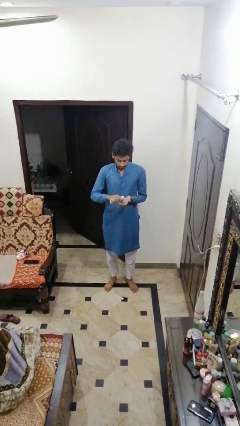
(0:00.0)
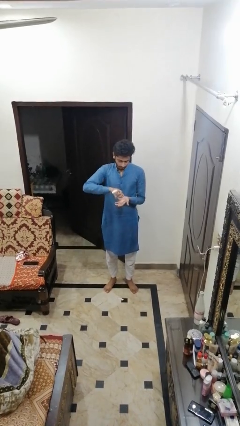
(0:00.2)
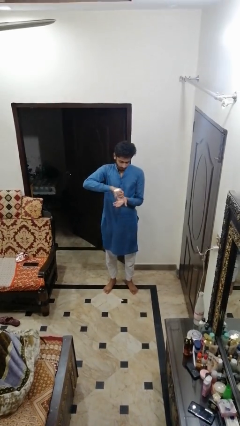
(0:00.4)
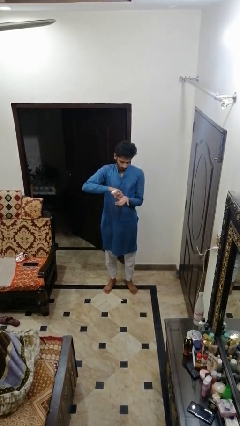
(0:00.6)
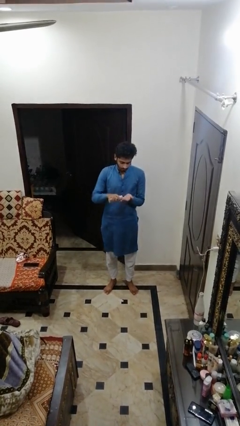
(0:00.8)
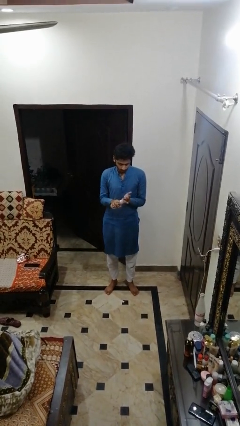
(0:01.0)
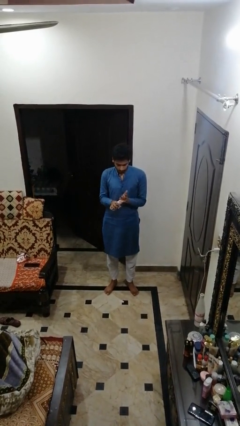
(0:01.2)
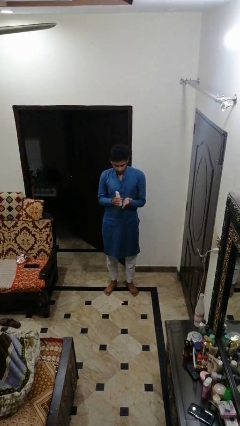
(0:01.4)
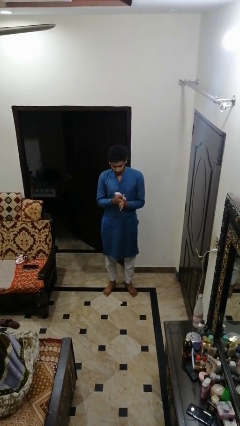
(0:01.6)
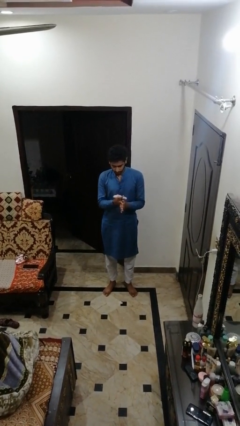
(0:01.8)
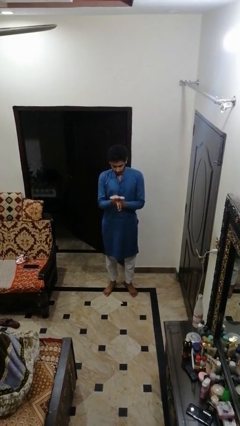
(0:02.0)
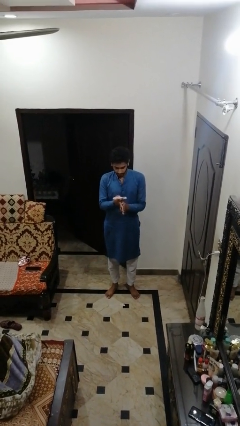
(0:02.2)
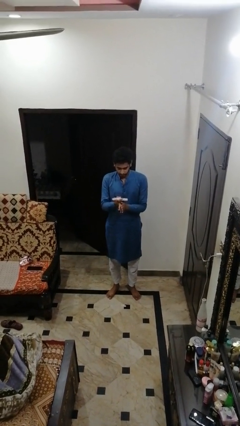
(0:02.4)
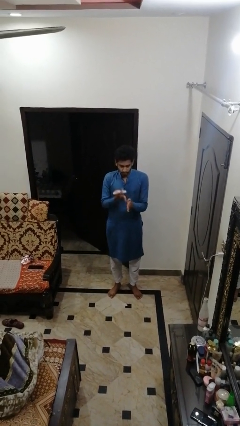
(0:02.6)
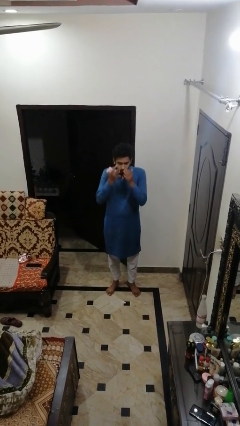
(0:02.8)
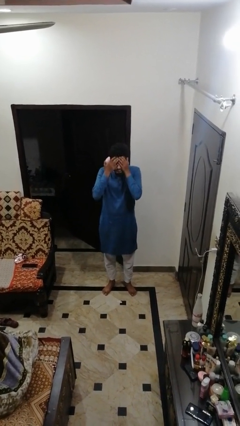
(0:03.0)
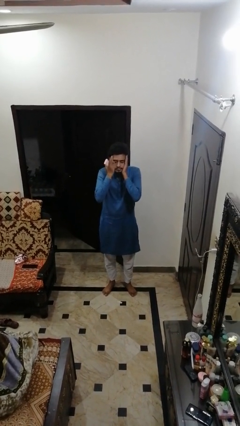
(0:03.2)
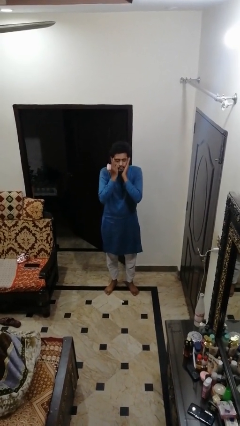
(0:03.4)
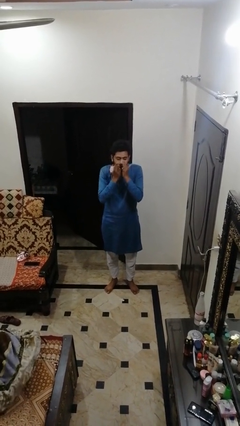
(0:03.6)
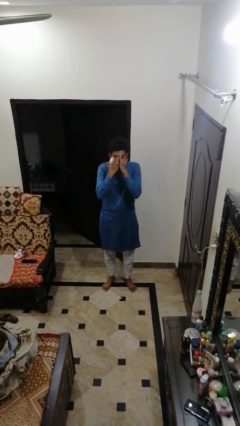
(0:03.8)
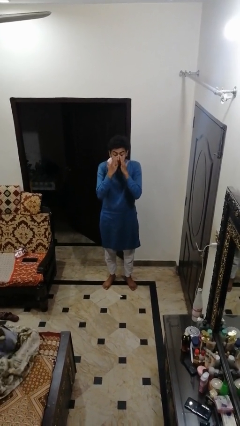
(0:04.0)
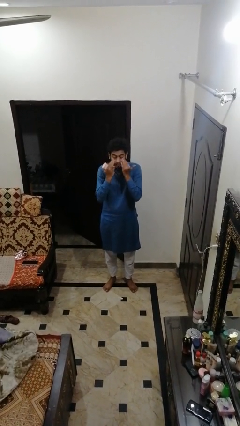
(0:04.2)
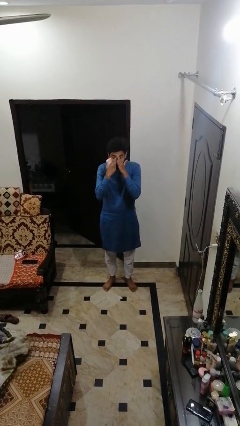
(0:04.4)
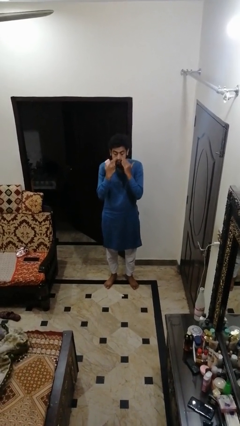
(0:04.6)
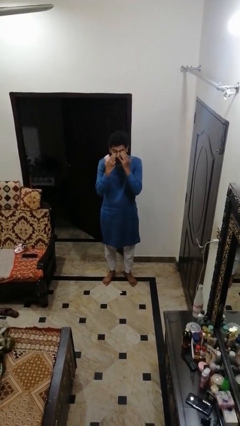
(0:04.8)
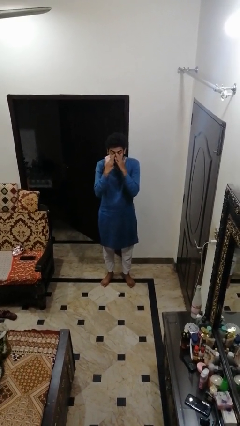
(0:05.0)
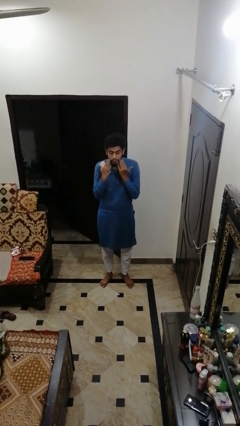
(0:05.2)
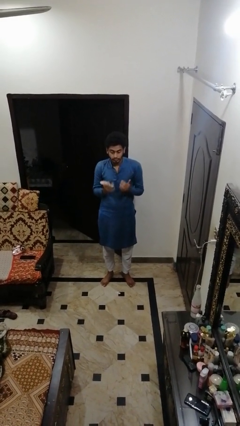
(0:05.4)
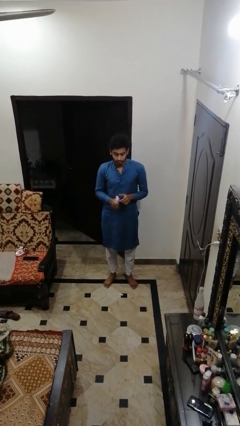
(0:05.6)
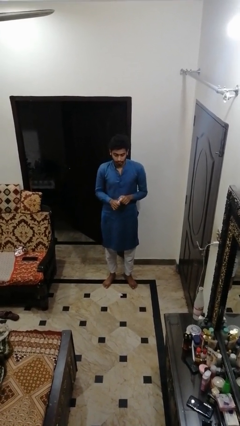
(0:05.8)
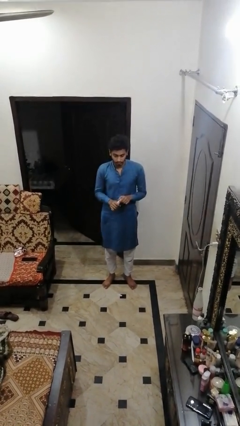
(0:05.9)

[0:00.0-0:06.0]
person applies facial moisturizer

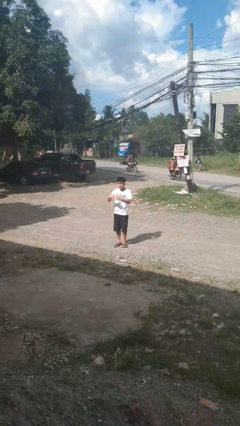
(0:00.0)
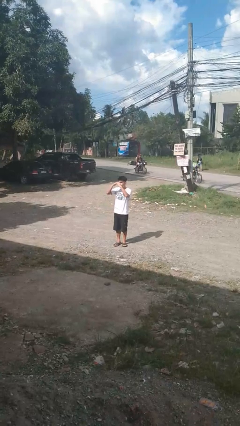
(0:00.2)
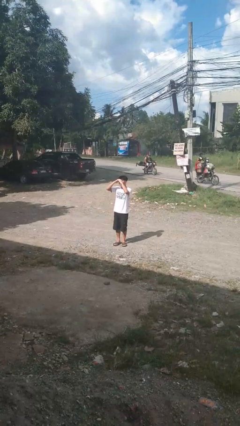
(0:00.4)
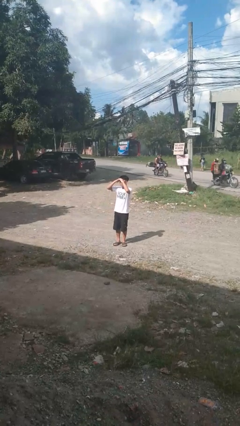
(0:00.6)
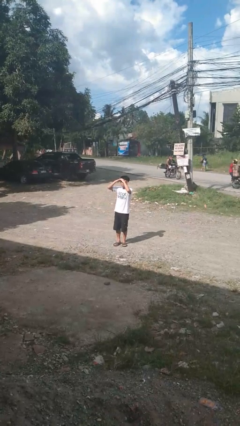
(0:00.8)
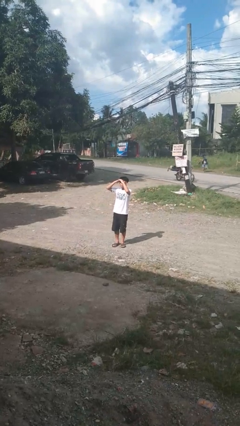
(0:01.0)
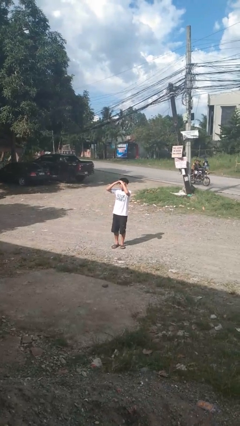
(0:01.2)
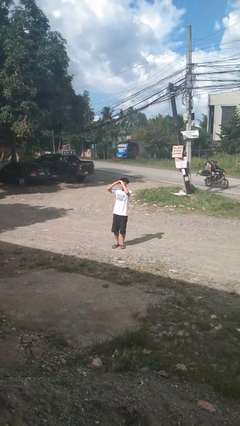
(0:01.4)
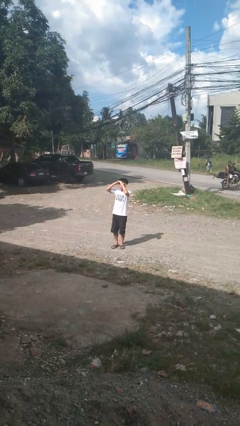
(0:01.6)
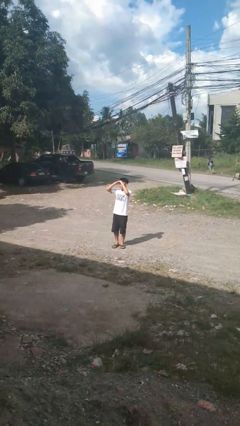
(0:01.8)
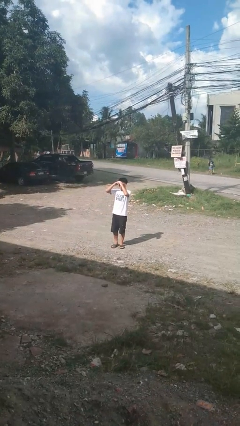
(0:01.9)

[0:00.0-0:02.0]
person shades eyes

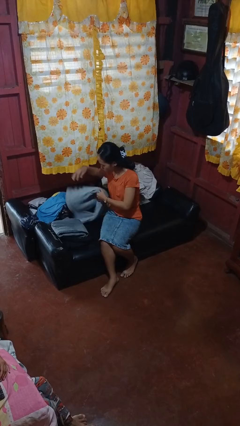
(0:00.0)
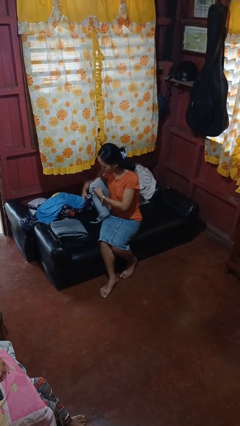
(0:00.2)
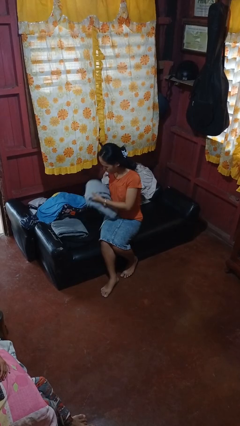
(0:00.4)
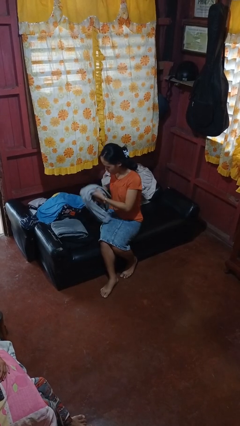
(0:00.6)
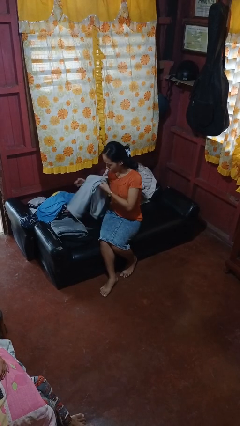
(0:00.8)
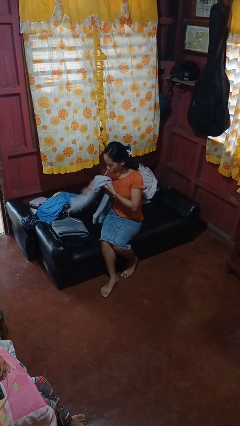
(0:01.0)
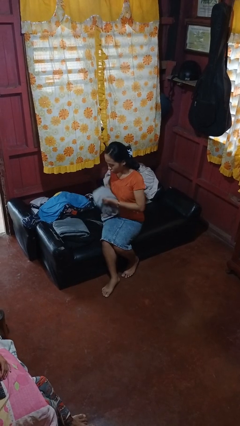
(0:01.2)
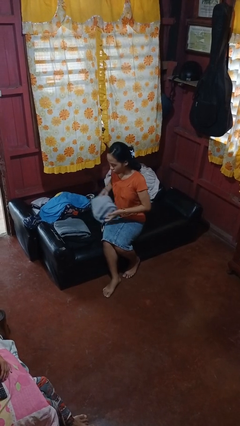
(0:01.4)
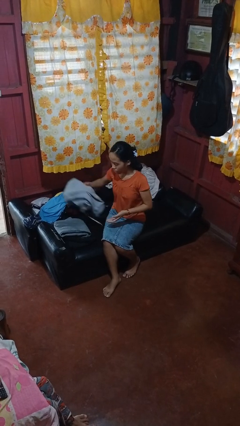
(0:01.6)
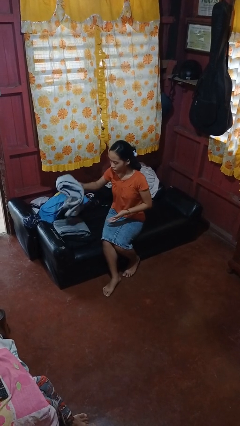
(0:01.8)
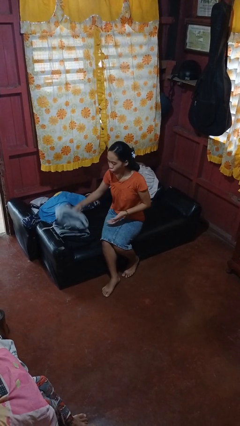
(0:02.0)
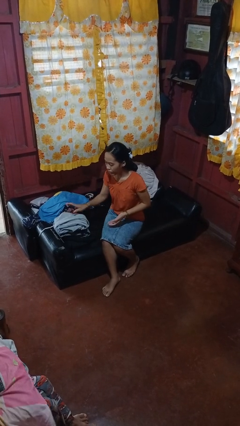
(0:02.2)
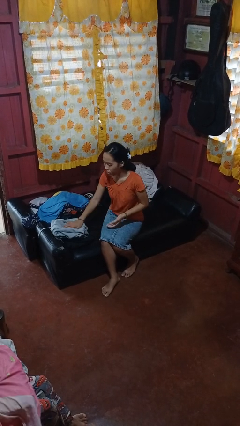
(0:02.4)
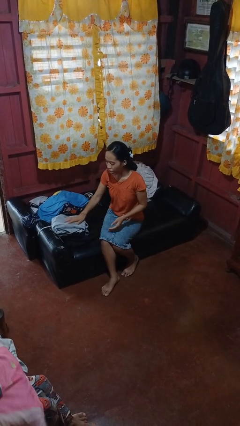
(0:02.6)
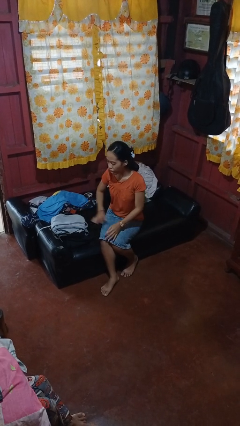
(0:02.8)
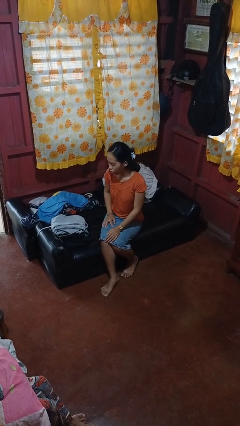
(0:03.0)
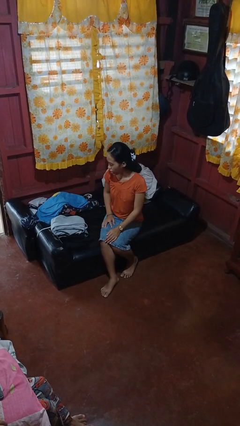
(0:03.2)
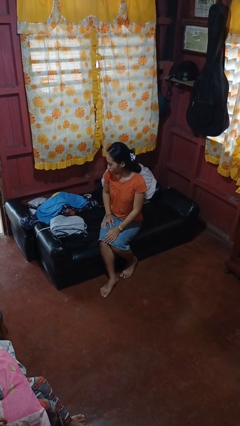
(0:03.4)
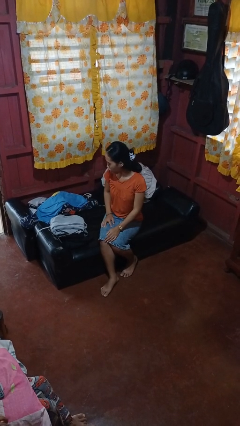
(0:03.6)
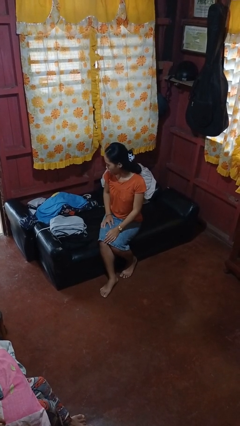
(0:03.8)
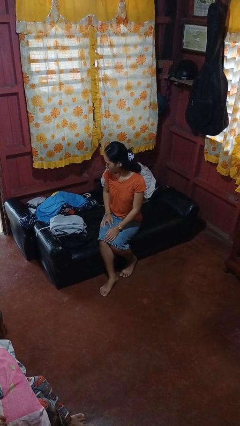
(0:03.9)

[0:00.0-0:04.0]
person folds pants

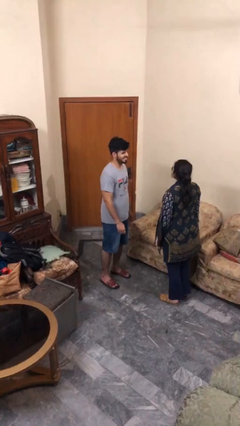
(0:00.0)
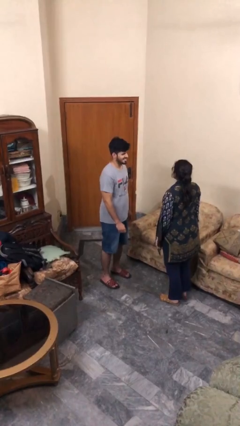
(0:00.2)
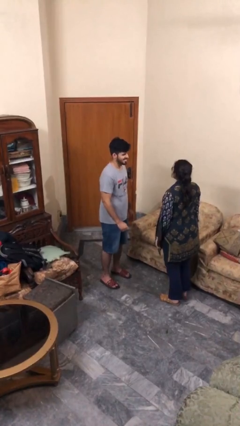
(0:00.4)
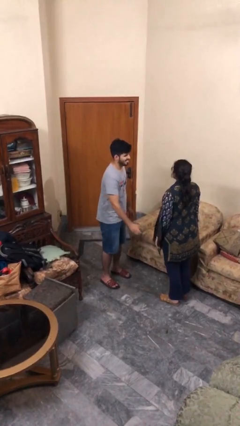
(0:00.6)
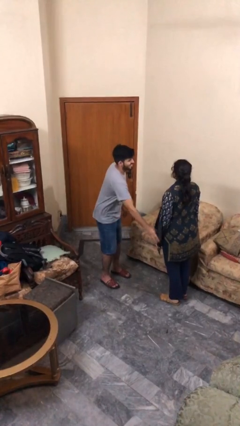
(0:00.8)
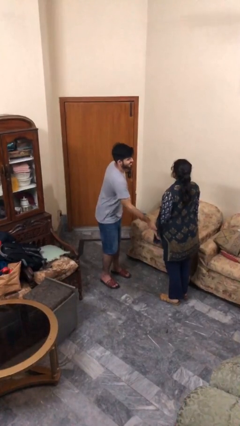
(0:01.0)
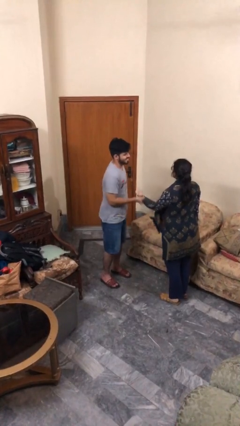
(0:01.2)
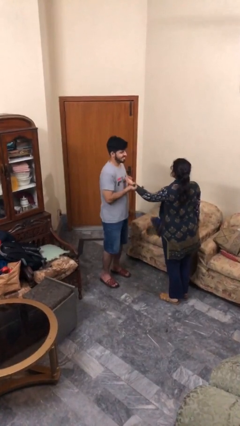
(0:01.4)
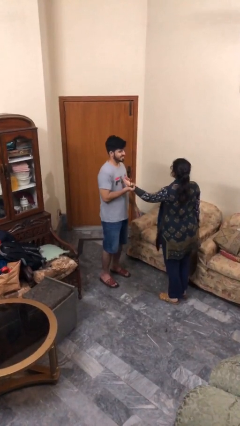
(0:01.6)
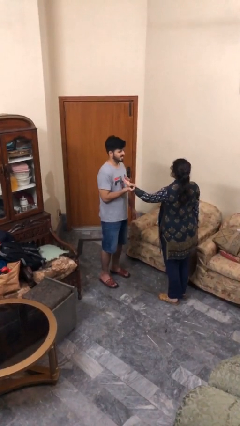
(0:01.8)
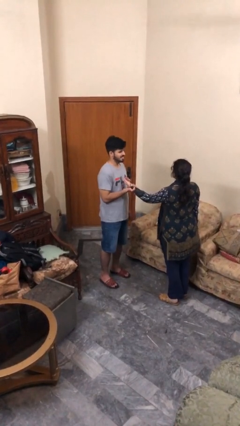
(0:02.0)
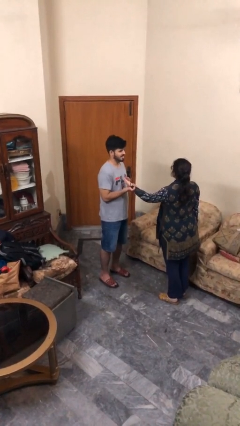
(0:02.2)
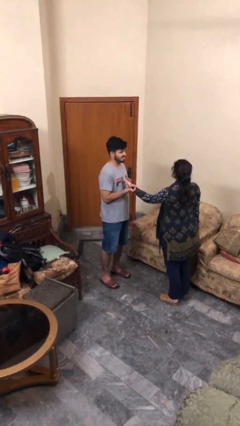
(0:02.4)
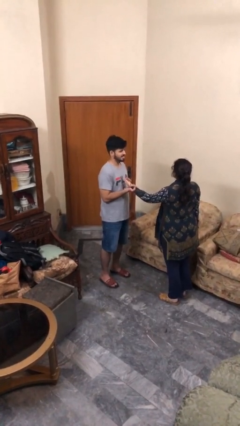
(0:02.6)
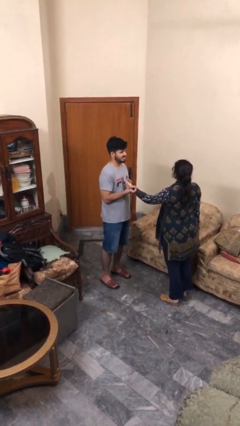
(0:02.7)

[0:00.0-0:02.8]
person grabs person by forearm

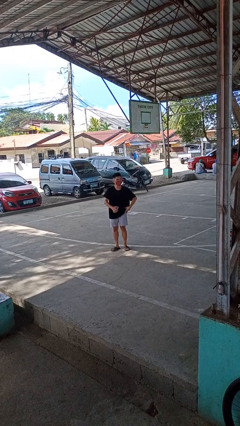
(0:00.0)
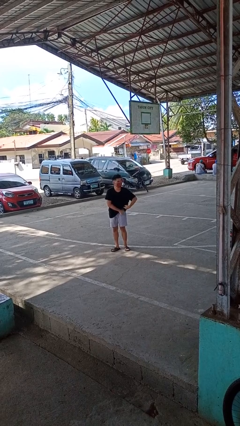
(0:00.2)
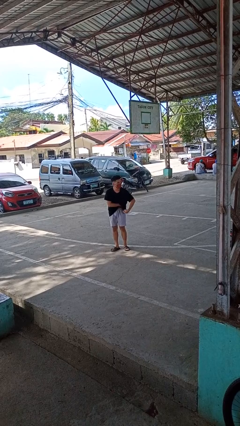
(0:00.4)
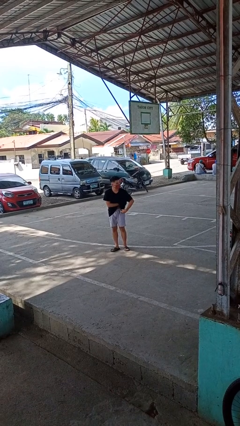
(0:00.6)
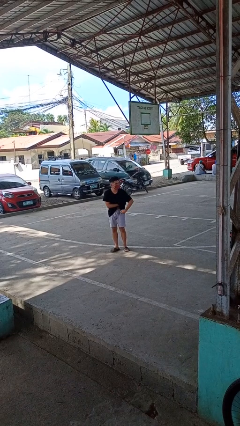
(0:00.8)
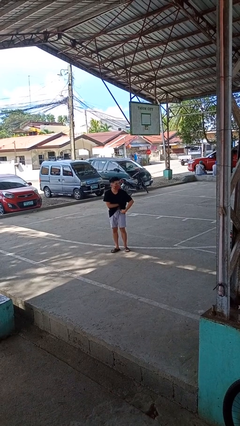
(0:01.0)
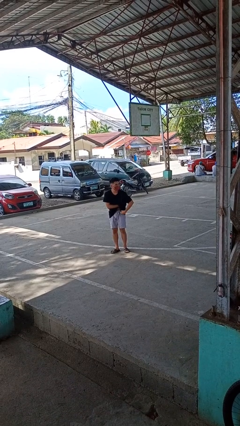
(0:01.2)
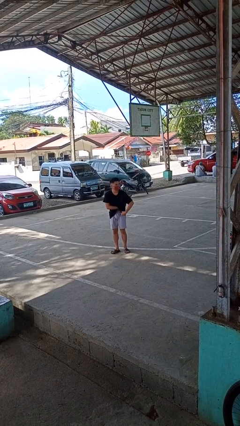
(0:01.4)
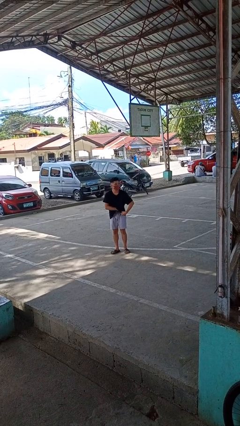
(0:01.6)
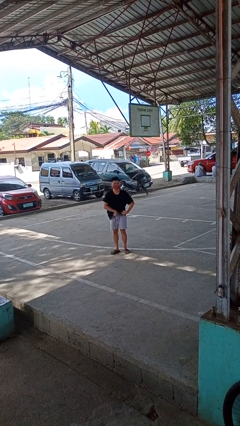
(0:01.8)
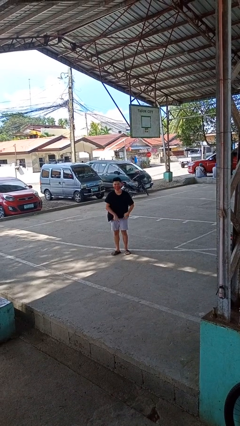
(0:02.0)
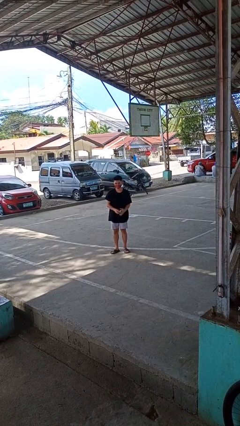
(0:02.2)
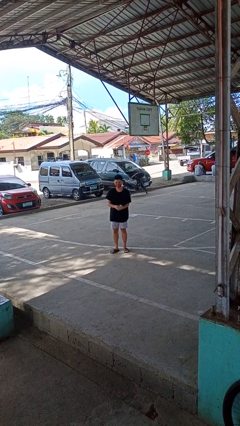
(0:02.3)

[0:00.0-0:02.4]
person applies deodorant

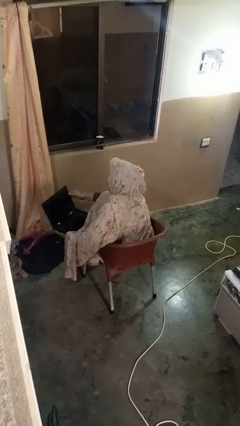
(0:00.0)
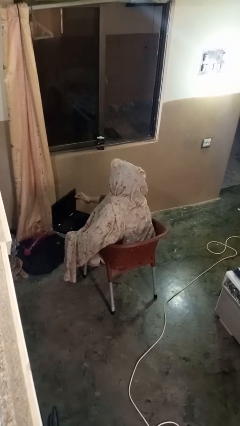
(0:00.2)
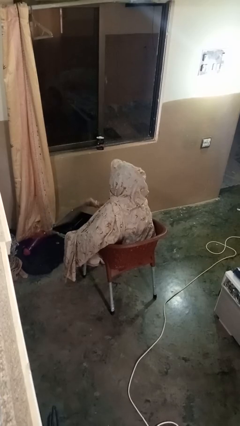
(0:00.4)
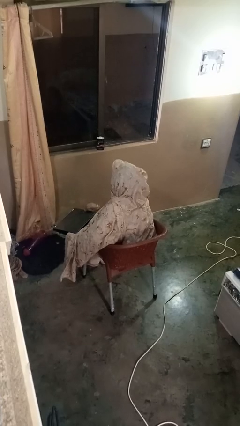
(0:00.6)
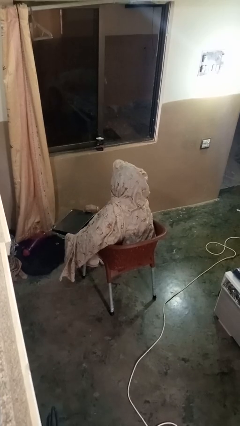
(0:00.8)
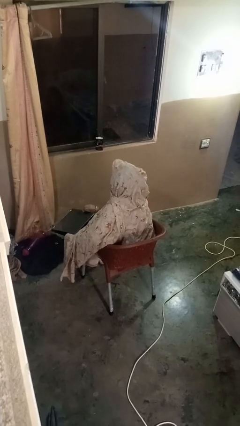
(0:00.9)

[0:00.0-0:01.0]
person closes laptop
